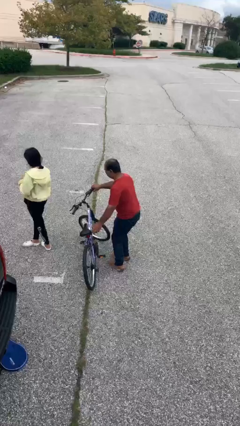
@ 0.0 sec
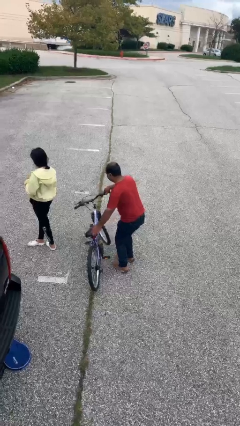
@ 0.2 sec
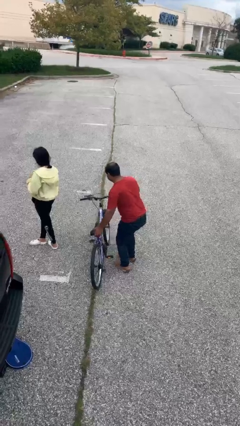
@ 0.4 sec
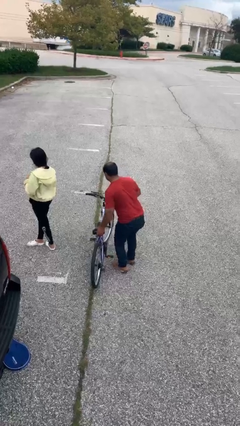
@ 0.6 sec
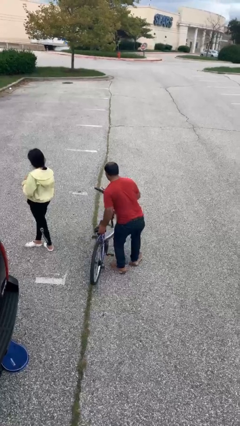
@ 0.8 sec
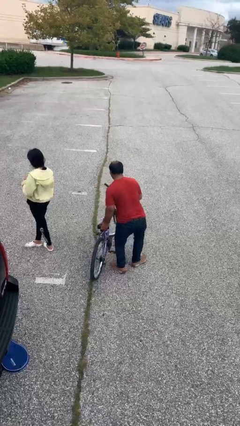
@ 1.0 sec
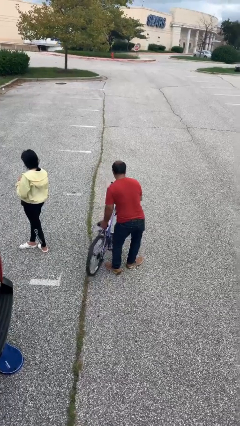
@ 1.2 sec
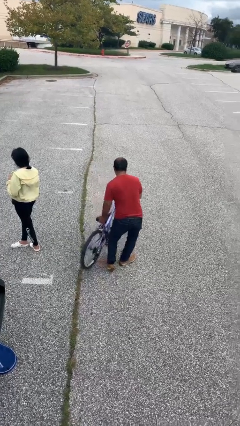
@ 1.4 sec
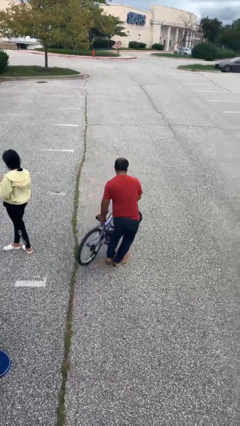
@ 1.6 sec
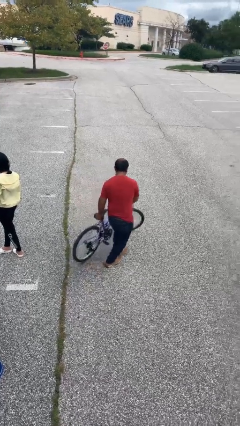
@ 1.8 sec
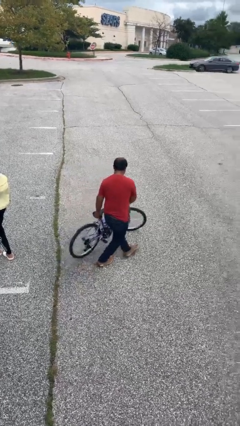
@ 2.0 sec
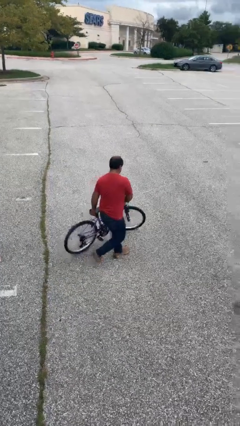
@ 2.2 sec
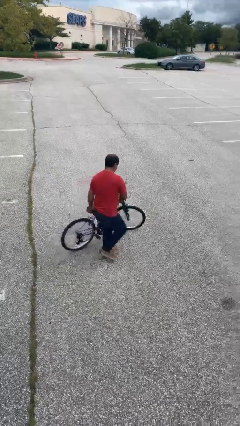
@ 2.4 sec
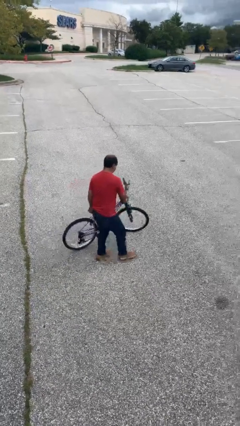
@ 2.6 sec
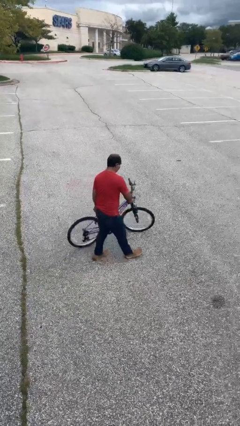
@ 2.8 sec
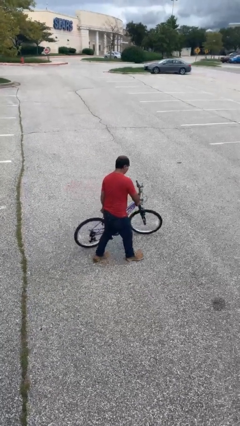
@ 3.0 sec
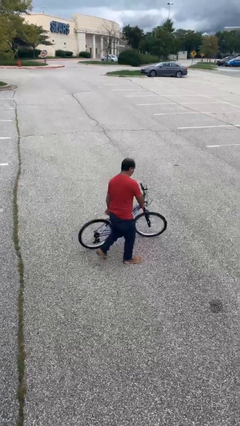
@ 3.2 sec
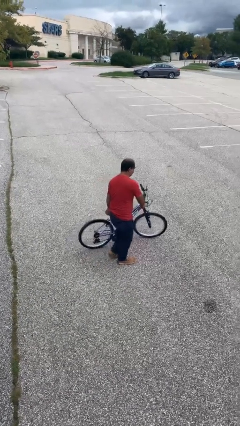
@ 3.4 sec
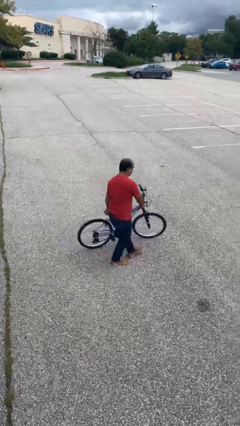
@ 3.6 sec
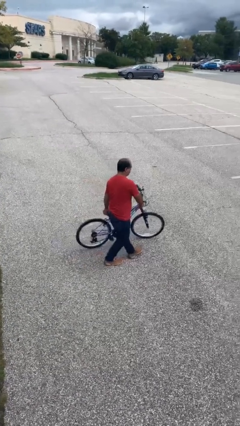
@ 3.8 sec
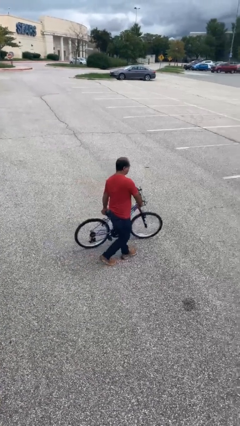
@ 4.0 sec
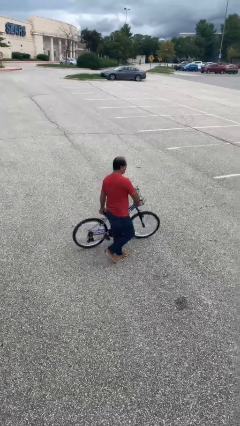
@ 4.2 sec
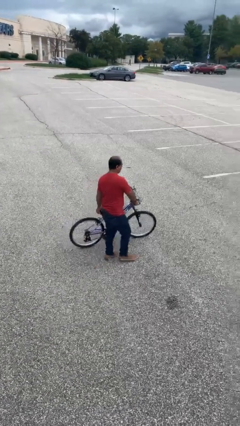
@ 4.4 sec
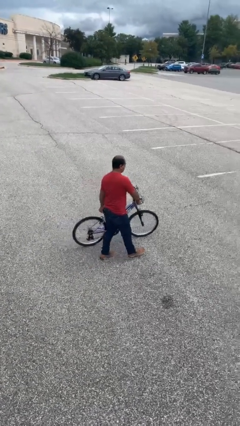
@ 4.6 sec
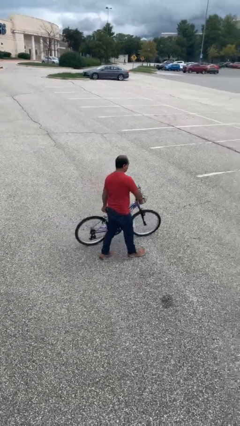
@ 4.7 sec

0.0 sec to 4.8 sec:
person steals object from person

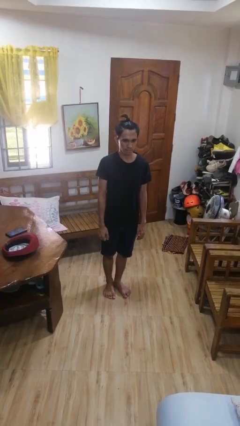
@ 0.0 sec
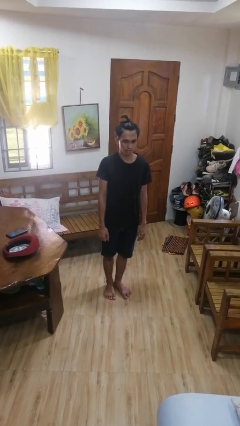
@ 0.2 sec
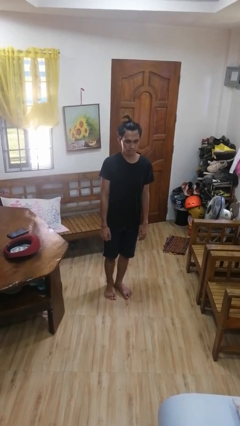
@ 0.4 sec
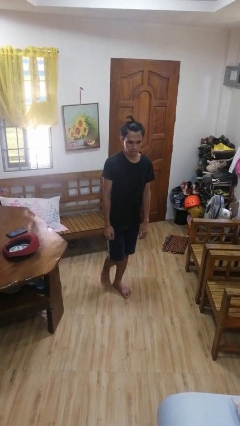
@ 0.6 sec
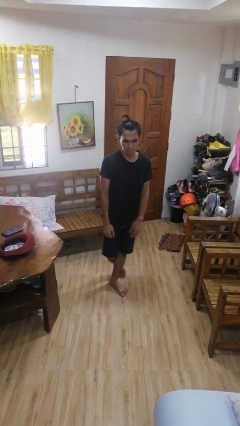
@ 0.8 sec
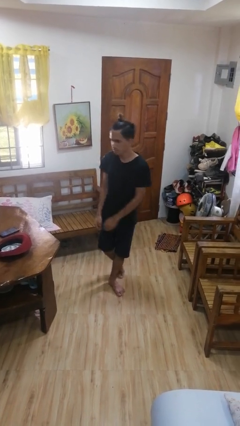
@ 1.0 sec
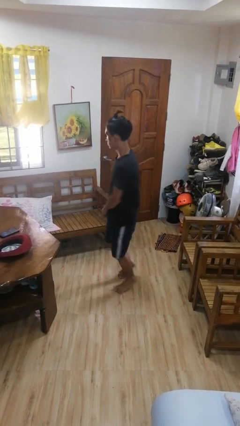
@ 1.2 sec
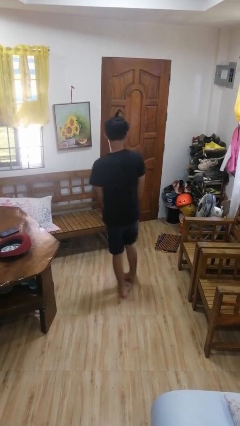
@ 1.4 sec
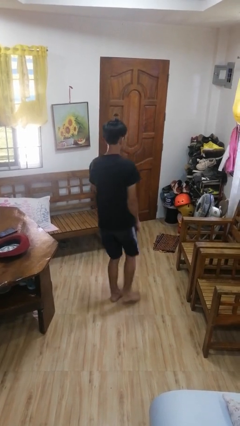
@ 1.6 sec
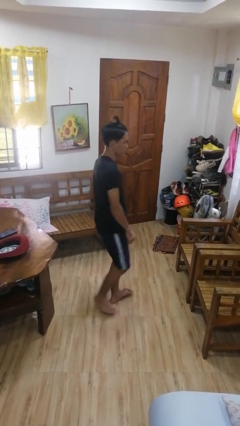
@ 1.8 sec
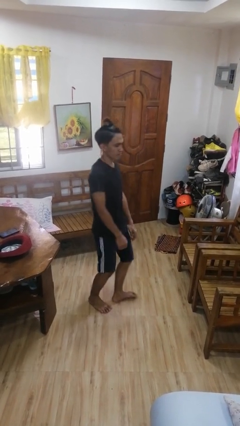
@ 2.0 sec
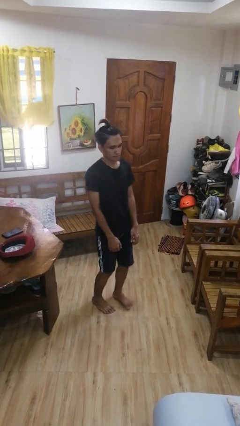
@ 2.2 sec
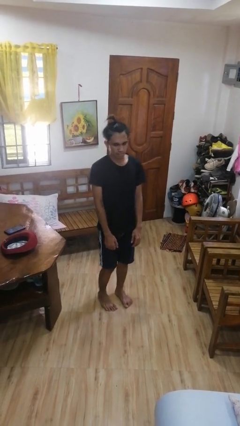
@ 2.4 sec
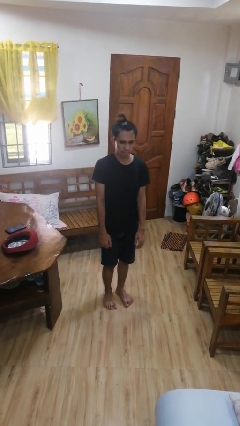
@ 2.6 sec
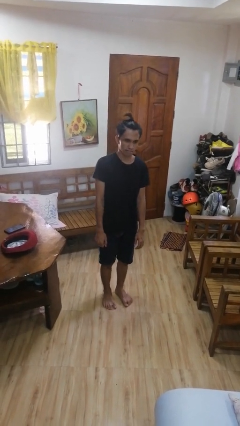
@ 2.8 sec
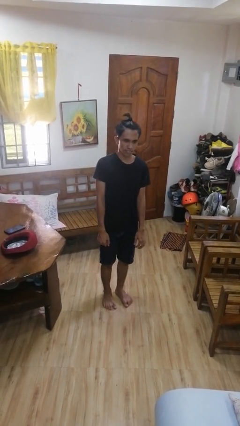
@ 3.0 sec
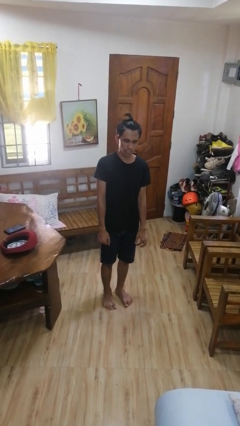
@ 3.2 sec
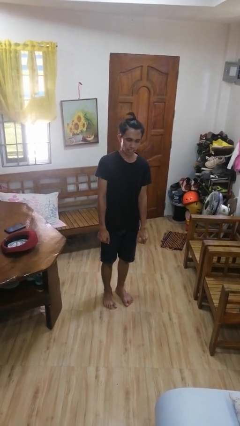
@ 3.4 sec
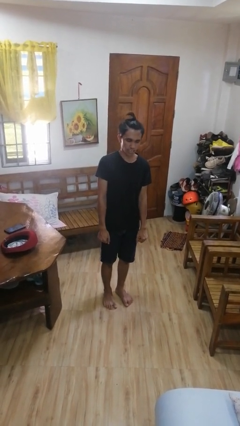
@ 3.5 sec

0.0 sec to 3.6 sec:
person twirls

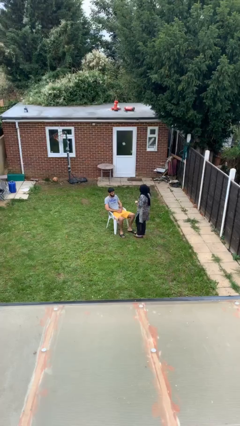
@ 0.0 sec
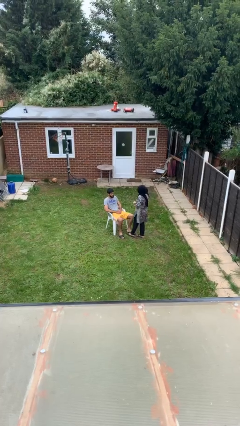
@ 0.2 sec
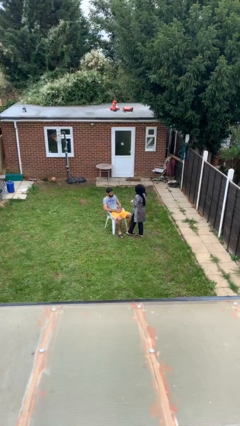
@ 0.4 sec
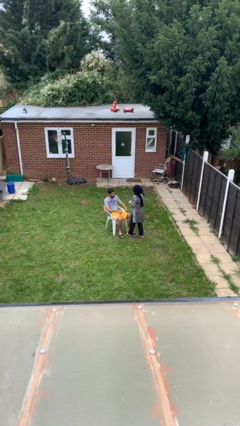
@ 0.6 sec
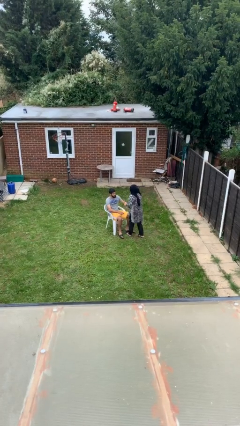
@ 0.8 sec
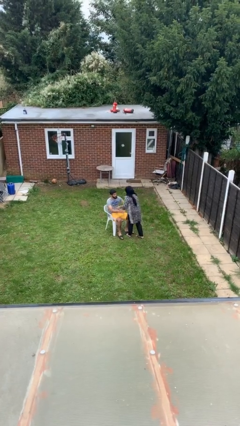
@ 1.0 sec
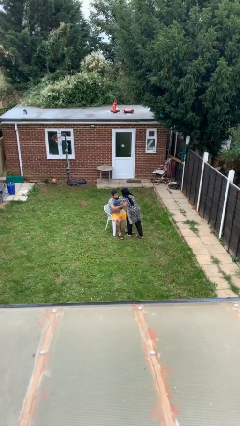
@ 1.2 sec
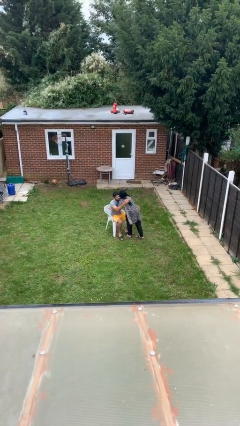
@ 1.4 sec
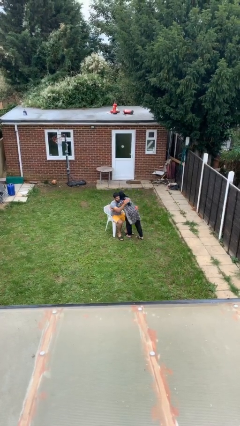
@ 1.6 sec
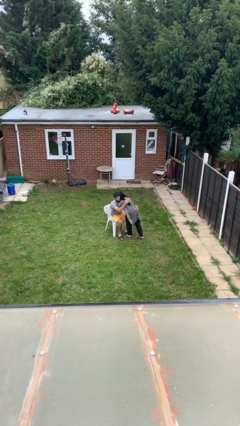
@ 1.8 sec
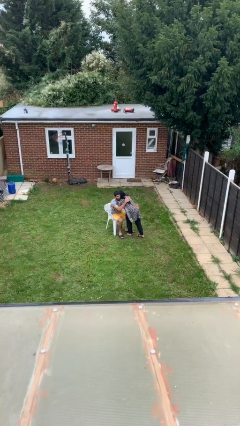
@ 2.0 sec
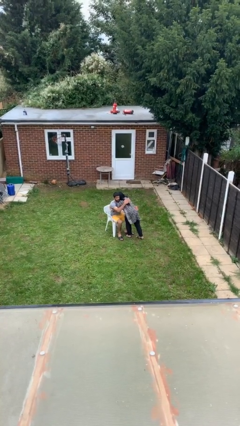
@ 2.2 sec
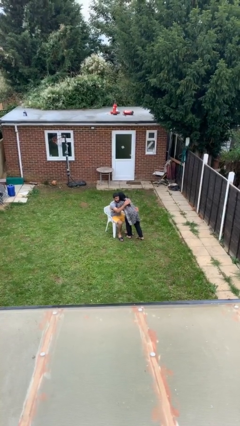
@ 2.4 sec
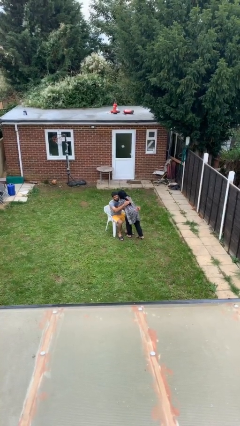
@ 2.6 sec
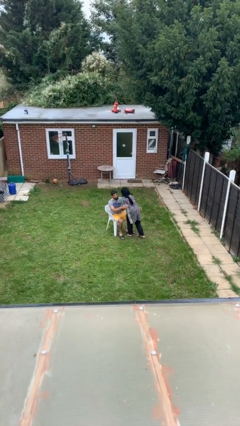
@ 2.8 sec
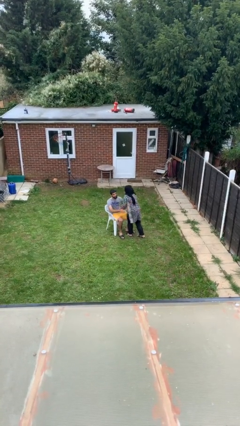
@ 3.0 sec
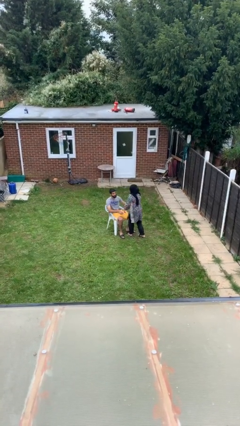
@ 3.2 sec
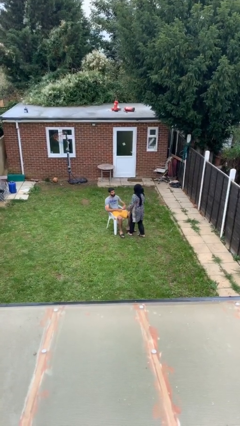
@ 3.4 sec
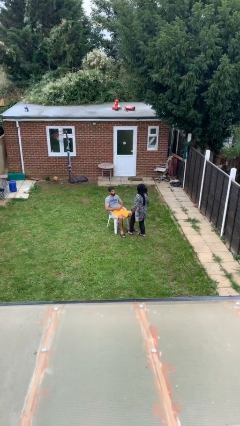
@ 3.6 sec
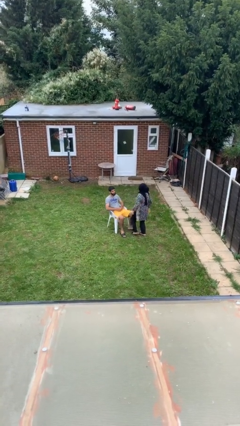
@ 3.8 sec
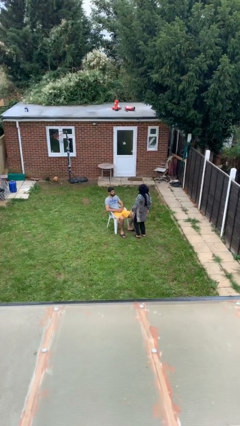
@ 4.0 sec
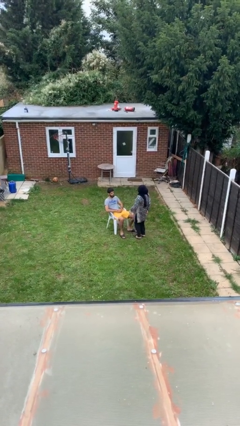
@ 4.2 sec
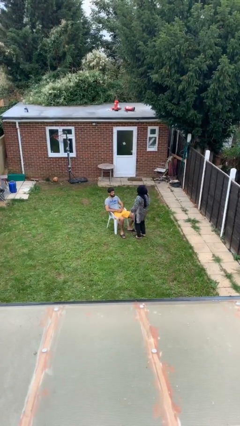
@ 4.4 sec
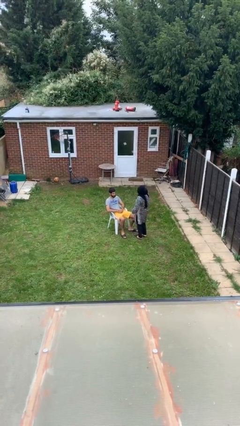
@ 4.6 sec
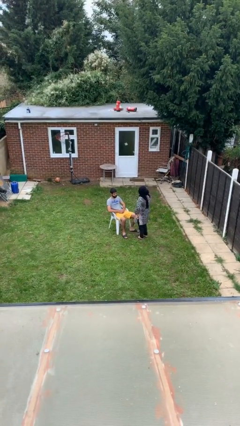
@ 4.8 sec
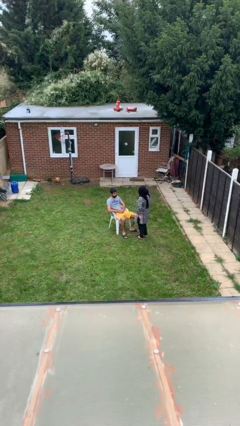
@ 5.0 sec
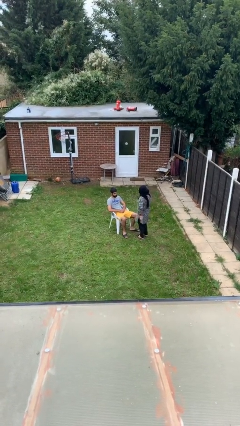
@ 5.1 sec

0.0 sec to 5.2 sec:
person embraces person

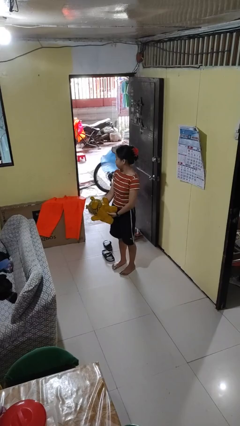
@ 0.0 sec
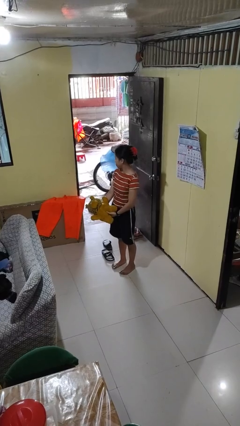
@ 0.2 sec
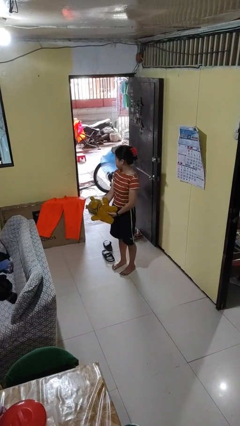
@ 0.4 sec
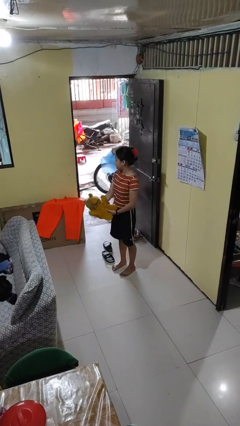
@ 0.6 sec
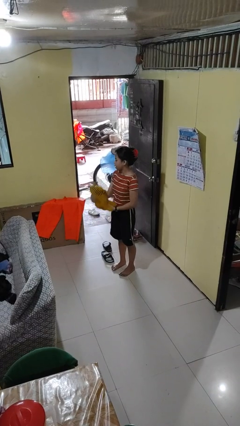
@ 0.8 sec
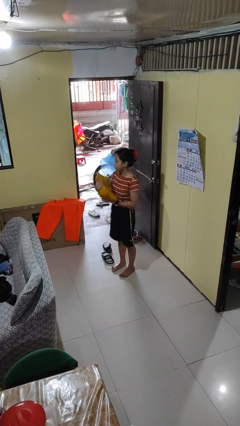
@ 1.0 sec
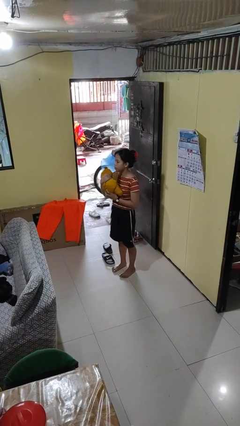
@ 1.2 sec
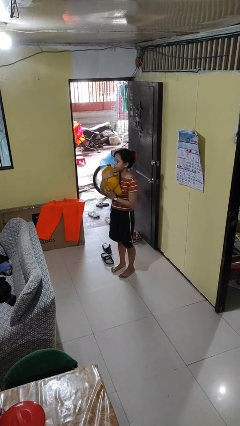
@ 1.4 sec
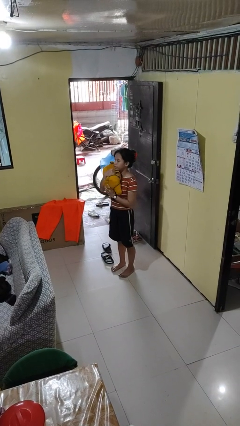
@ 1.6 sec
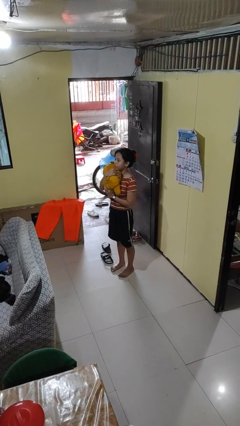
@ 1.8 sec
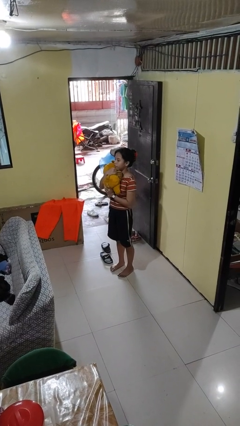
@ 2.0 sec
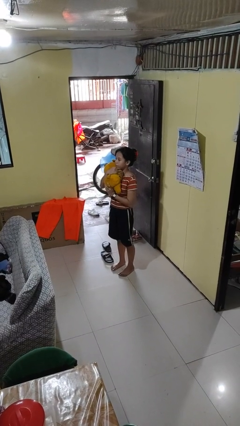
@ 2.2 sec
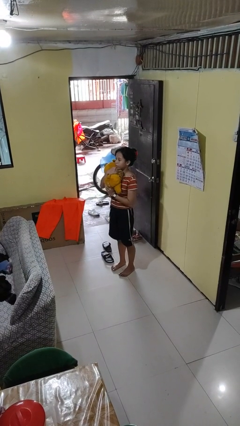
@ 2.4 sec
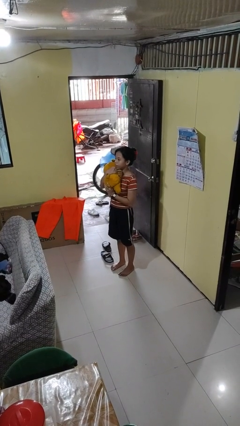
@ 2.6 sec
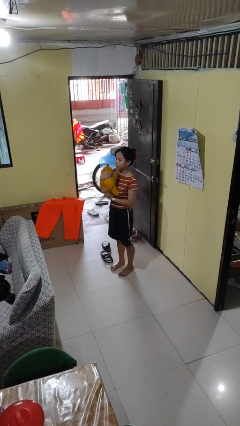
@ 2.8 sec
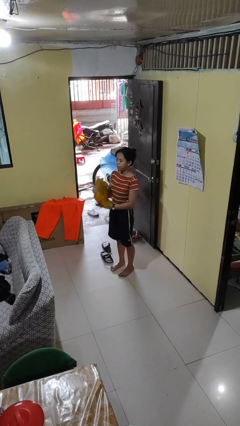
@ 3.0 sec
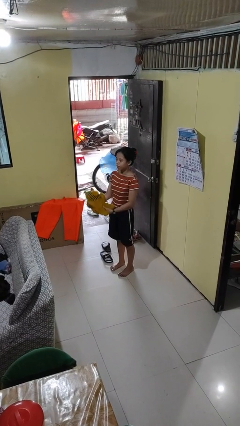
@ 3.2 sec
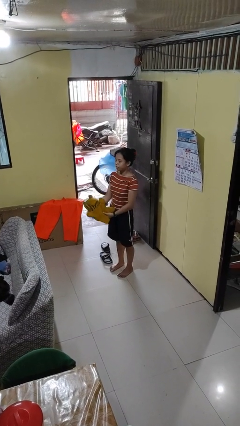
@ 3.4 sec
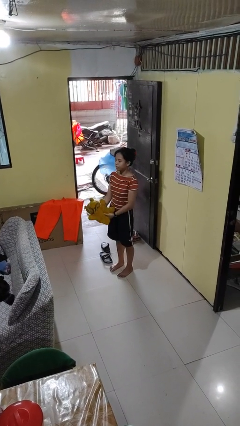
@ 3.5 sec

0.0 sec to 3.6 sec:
person hugs stuffed animal

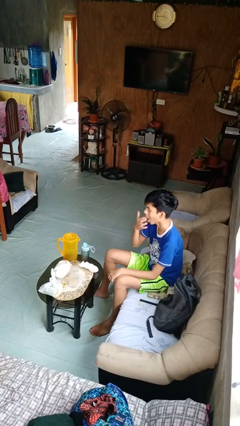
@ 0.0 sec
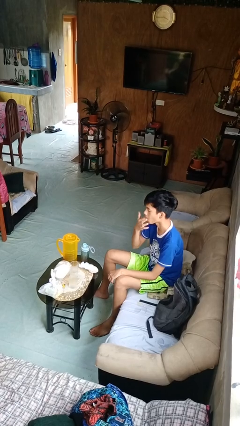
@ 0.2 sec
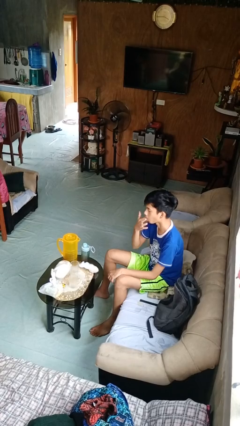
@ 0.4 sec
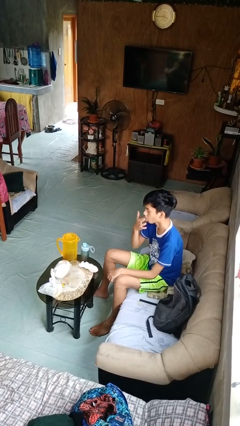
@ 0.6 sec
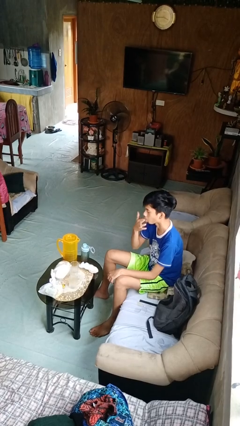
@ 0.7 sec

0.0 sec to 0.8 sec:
person licks fingers
